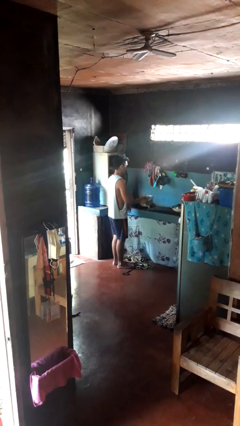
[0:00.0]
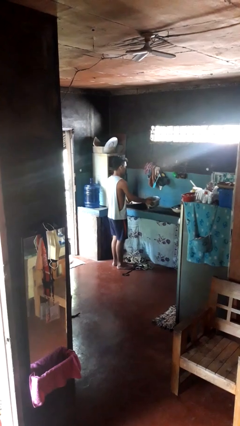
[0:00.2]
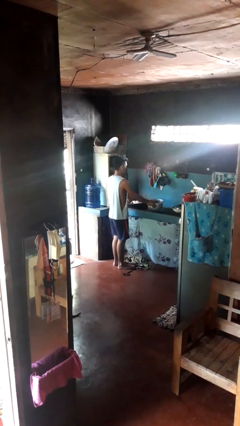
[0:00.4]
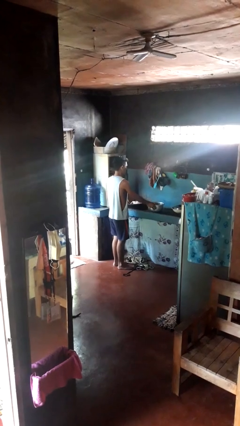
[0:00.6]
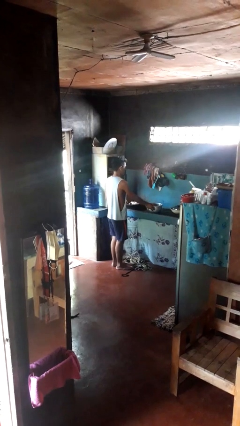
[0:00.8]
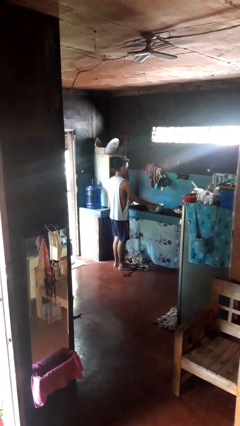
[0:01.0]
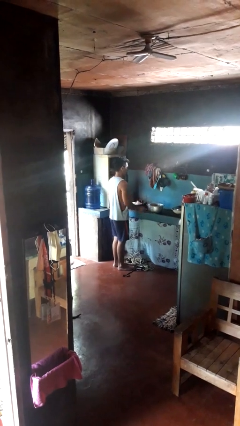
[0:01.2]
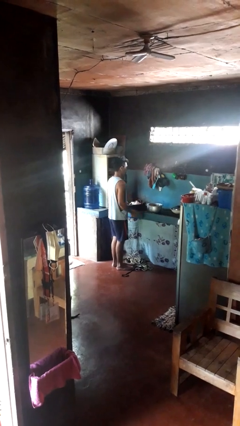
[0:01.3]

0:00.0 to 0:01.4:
person puts down object on countertop

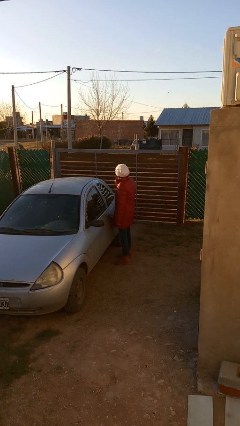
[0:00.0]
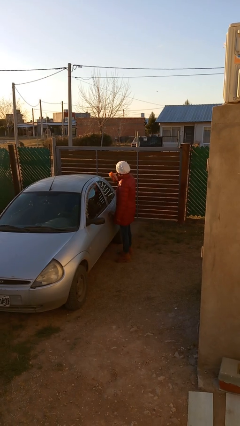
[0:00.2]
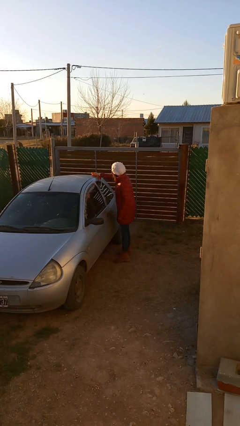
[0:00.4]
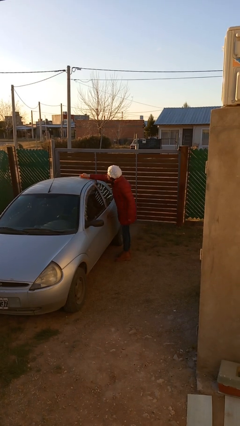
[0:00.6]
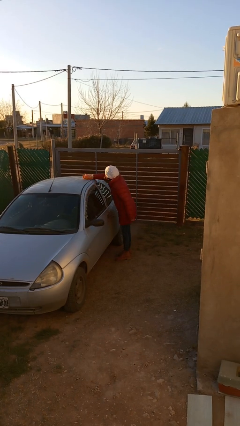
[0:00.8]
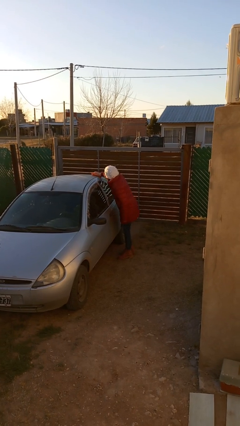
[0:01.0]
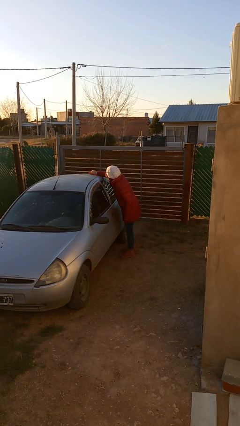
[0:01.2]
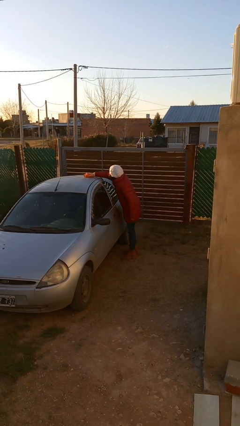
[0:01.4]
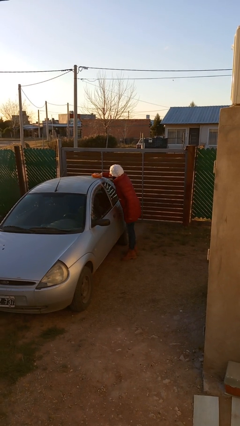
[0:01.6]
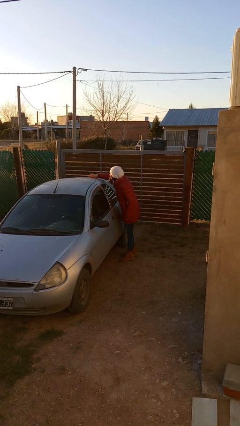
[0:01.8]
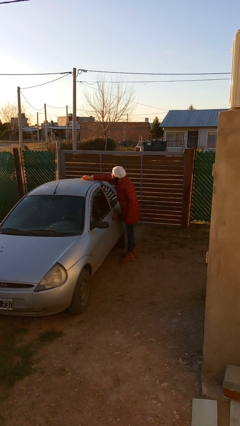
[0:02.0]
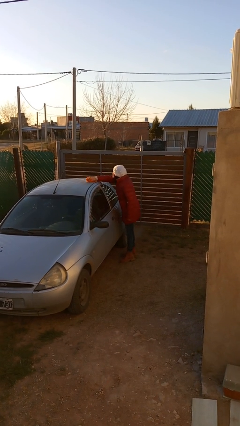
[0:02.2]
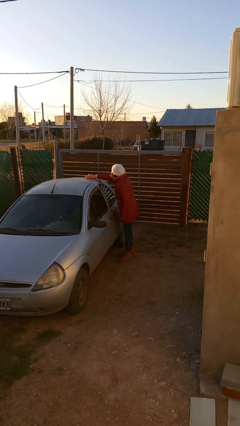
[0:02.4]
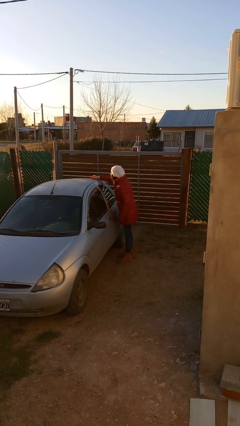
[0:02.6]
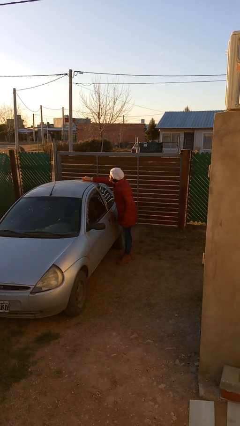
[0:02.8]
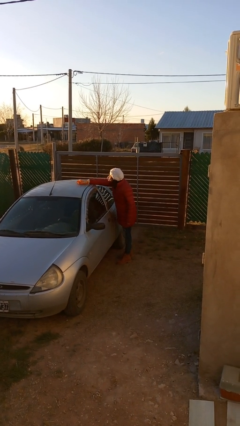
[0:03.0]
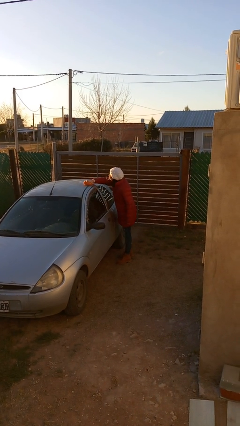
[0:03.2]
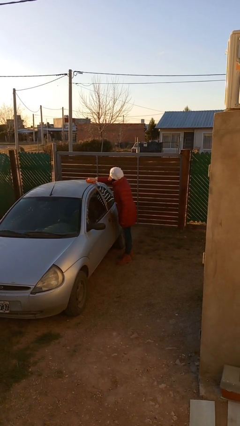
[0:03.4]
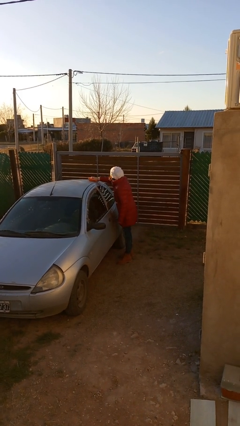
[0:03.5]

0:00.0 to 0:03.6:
person polishes car with rag

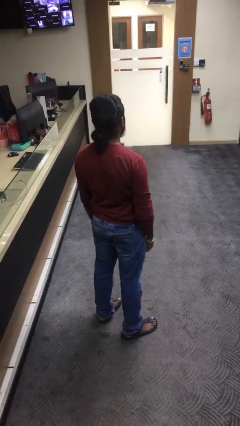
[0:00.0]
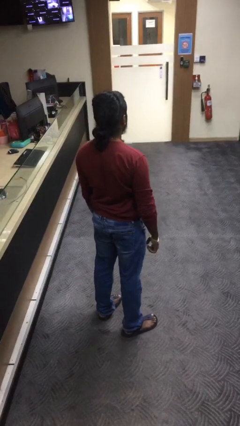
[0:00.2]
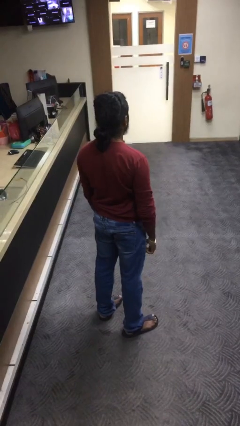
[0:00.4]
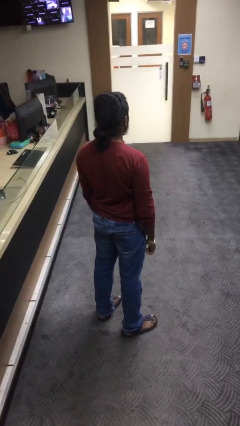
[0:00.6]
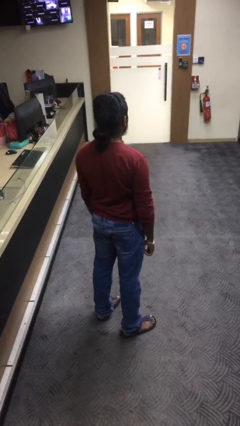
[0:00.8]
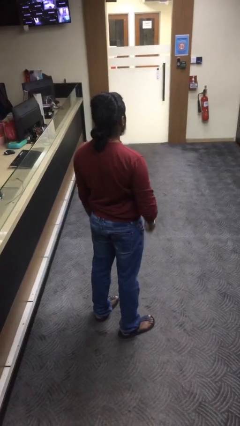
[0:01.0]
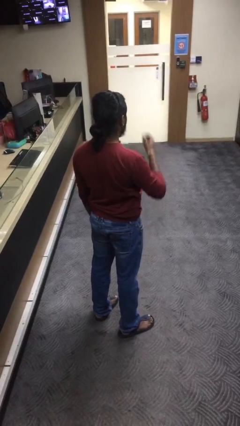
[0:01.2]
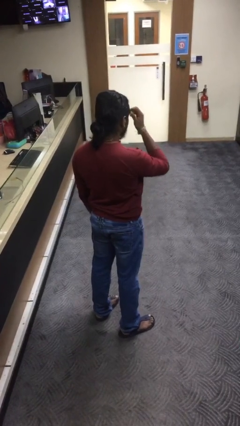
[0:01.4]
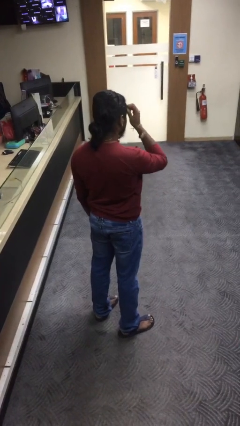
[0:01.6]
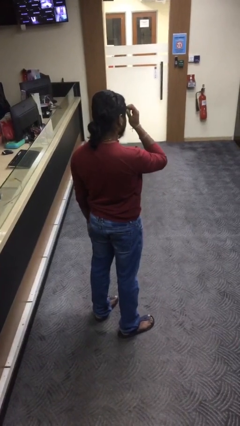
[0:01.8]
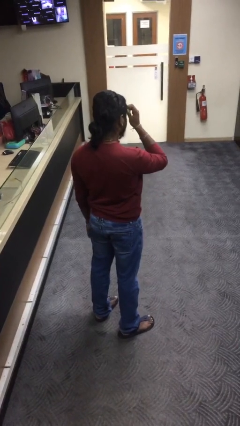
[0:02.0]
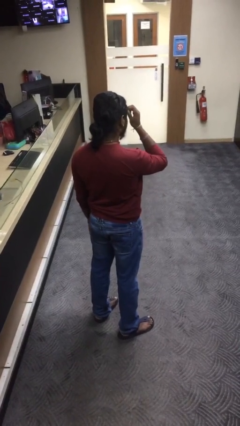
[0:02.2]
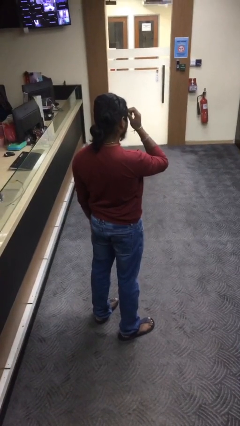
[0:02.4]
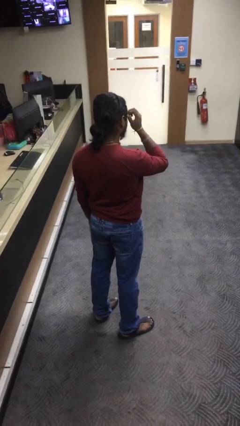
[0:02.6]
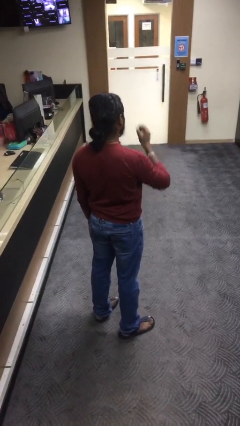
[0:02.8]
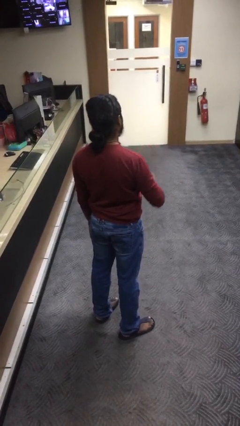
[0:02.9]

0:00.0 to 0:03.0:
person scratches face

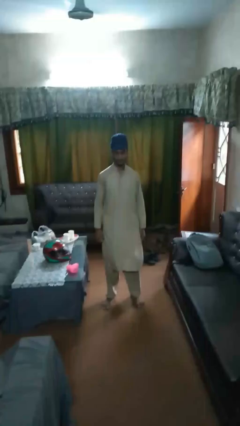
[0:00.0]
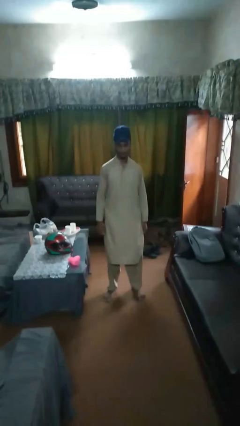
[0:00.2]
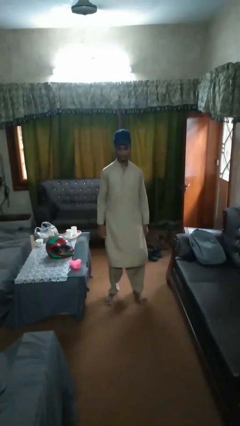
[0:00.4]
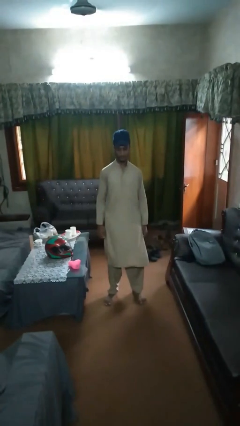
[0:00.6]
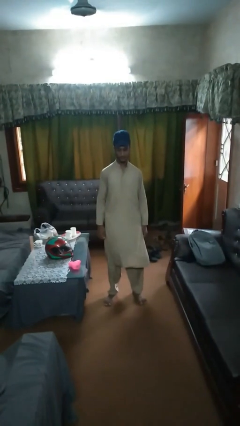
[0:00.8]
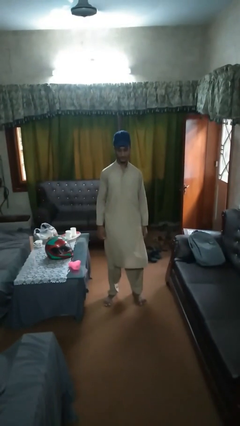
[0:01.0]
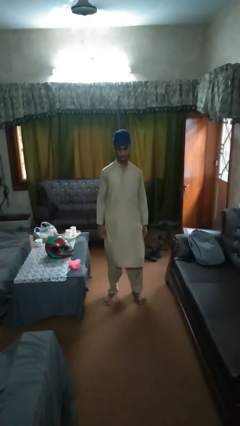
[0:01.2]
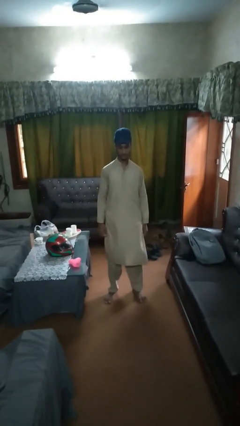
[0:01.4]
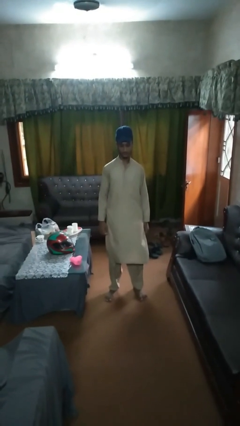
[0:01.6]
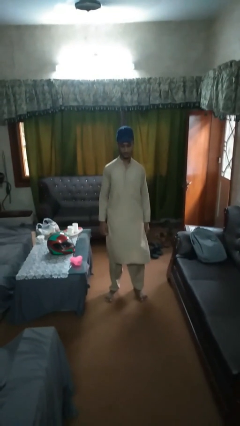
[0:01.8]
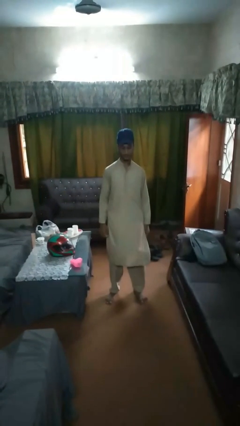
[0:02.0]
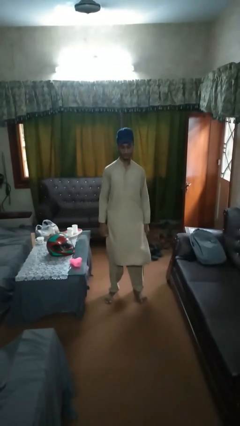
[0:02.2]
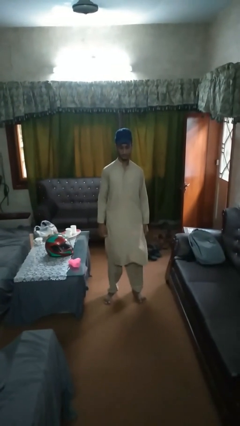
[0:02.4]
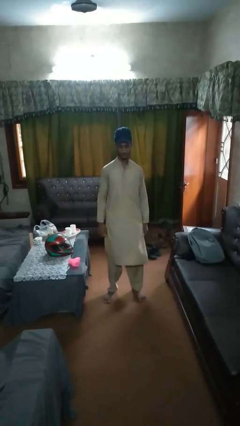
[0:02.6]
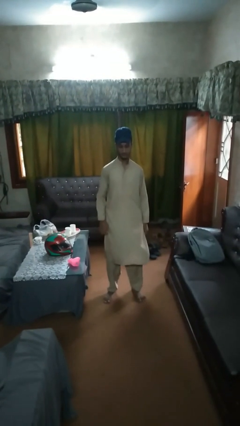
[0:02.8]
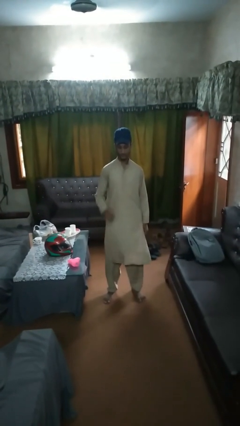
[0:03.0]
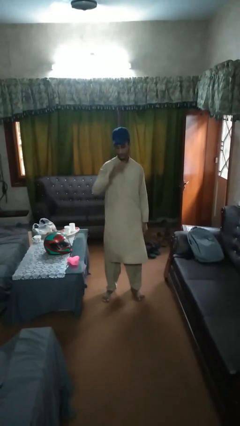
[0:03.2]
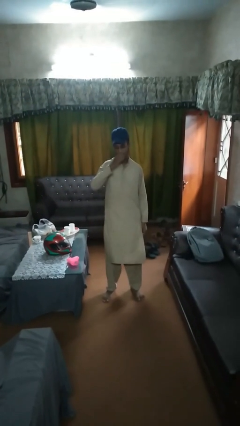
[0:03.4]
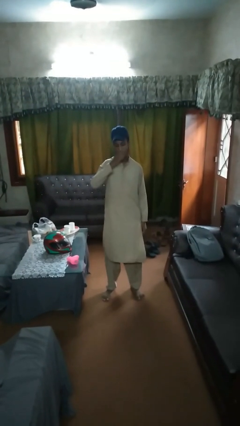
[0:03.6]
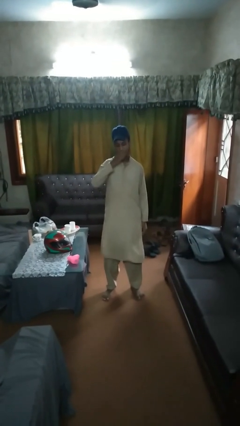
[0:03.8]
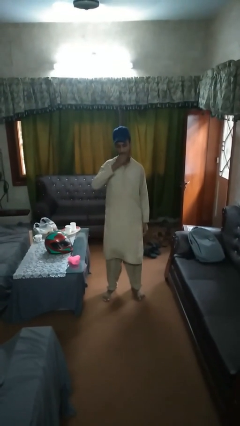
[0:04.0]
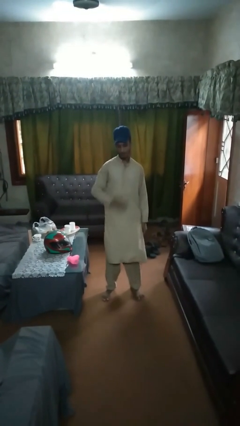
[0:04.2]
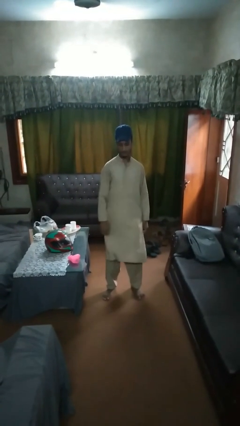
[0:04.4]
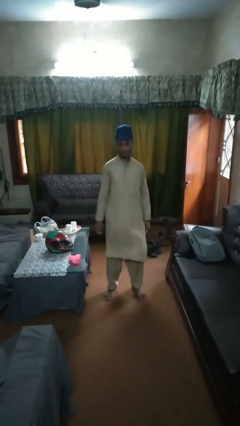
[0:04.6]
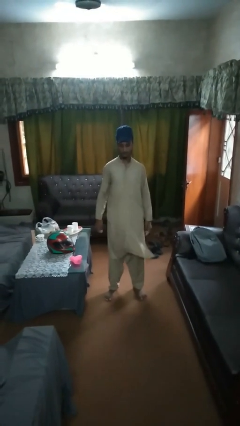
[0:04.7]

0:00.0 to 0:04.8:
person eats banana

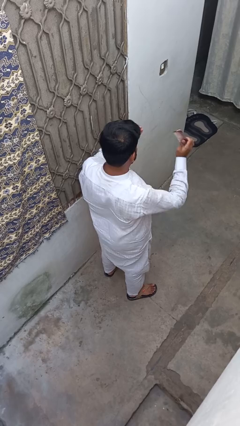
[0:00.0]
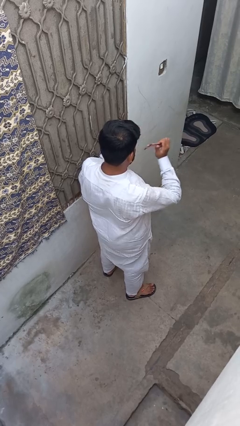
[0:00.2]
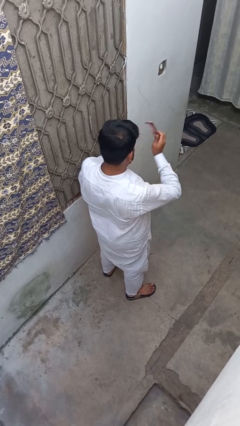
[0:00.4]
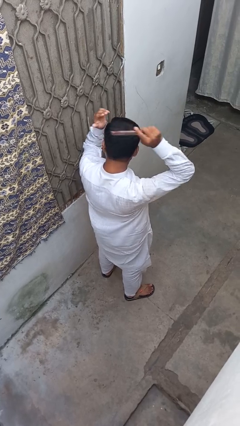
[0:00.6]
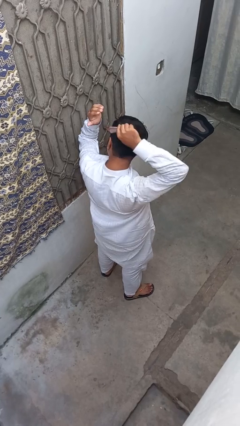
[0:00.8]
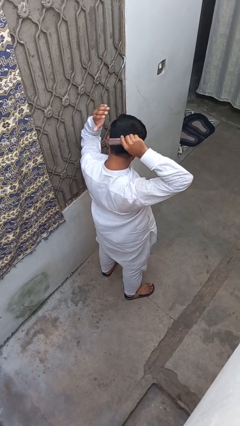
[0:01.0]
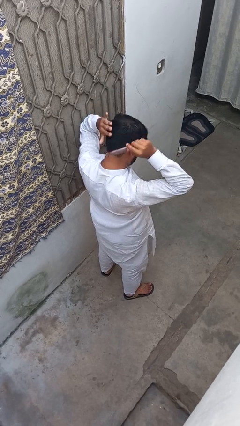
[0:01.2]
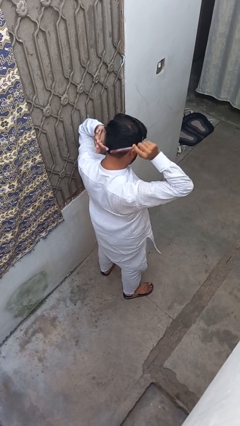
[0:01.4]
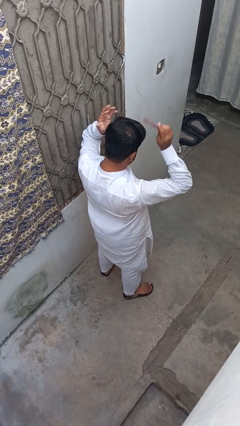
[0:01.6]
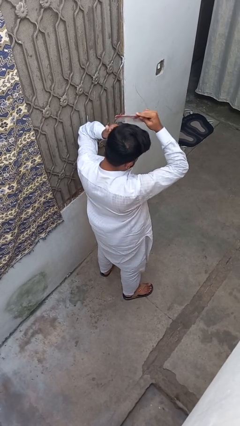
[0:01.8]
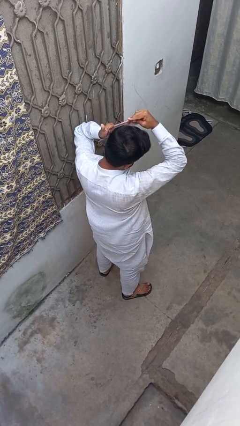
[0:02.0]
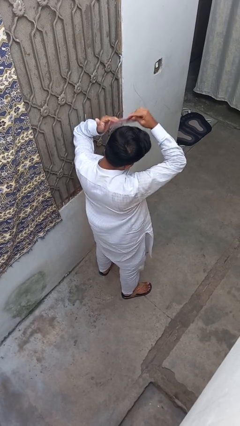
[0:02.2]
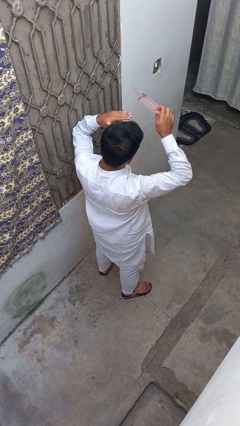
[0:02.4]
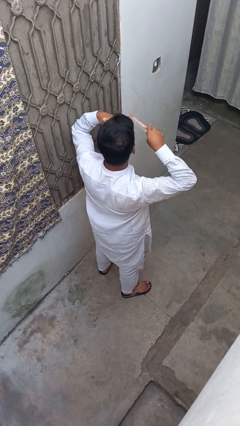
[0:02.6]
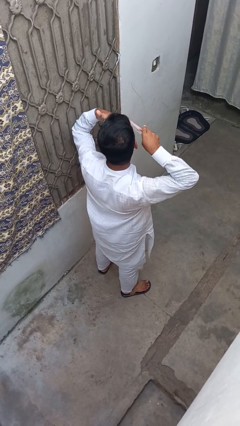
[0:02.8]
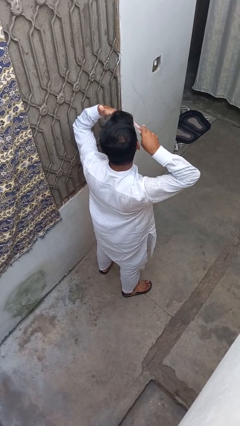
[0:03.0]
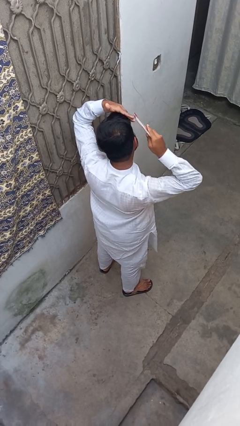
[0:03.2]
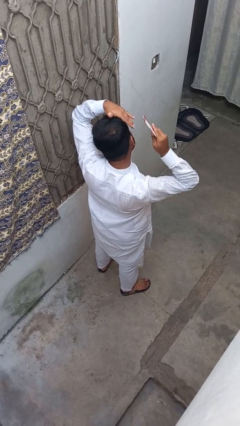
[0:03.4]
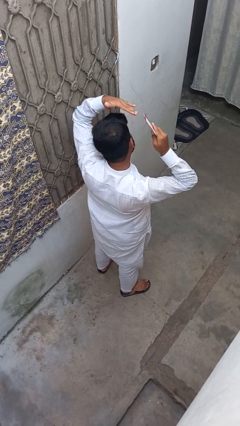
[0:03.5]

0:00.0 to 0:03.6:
person brushes hair

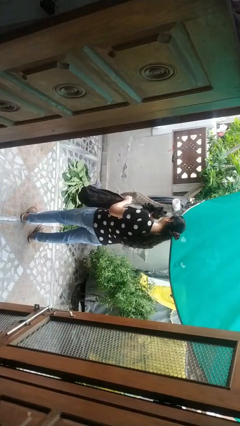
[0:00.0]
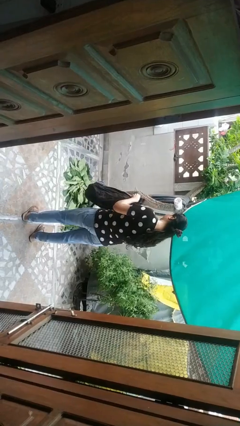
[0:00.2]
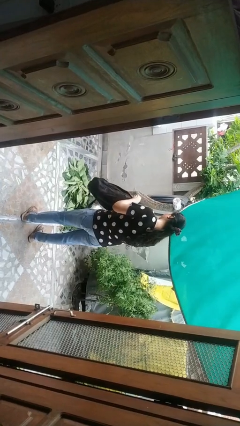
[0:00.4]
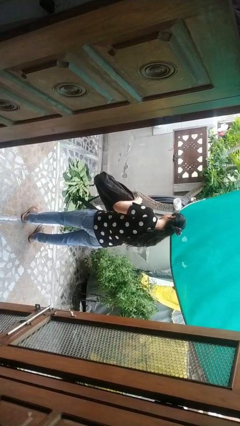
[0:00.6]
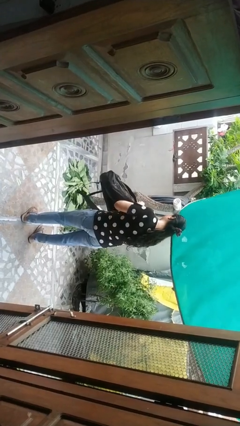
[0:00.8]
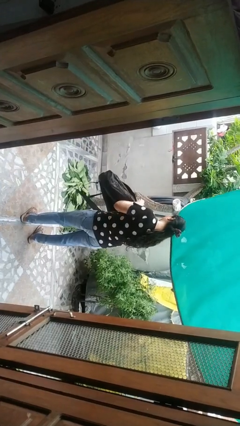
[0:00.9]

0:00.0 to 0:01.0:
person puts object into backpack

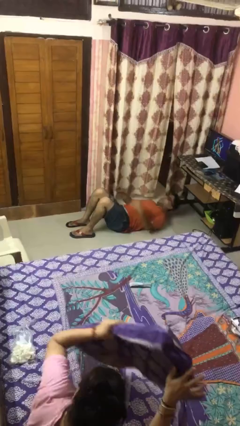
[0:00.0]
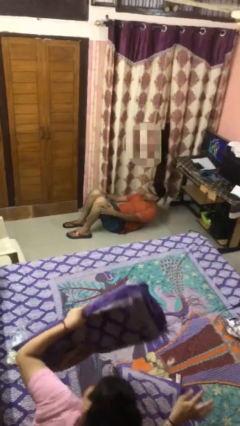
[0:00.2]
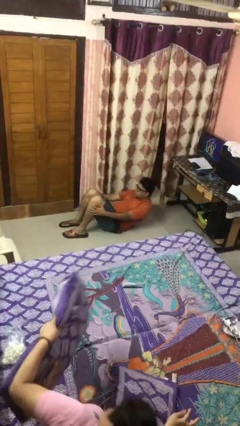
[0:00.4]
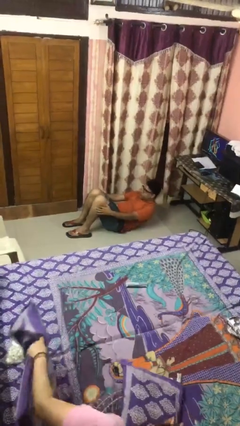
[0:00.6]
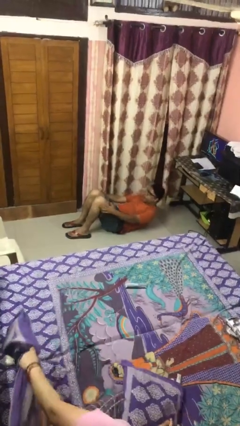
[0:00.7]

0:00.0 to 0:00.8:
person exercises with situp
